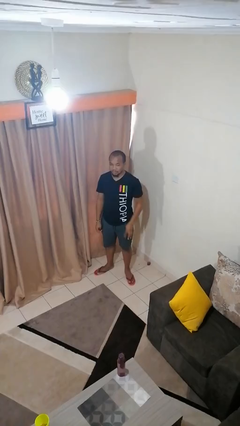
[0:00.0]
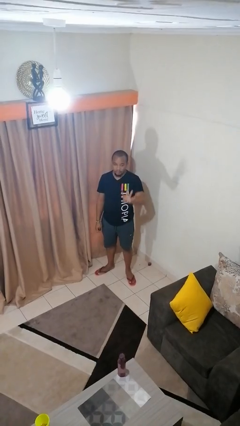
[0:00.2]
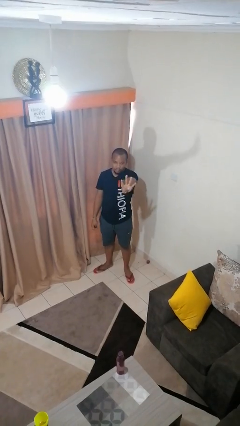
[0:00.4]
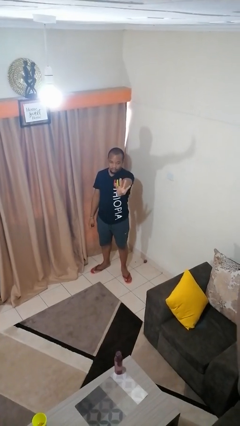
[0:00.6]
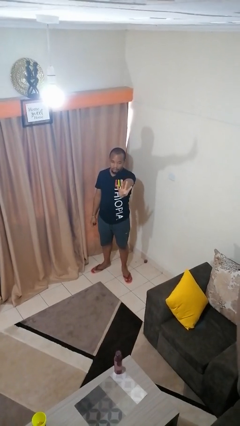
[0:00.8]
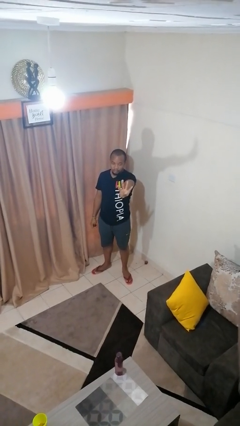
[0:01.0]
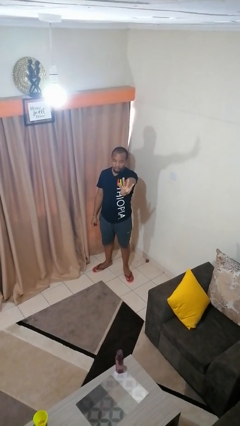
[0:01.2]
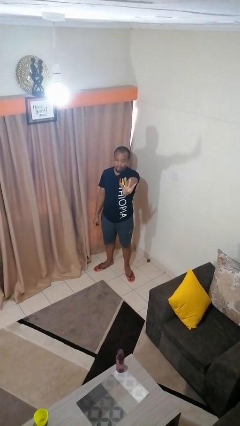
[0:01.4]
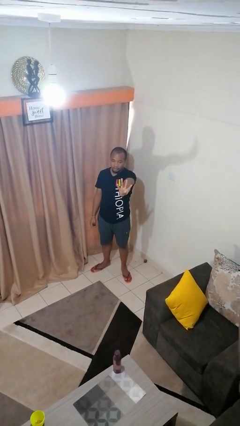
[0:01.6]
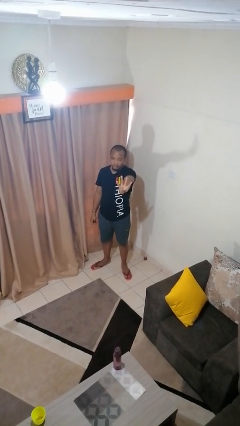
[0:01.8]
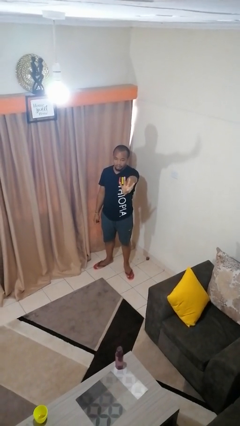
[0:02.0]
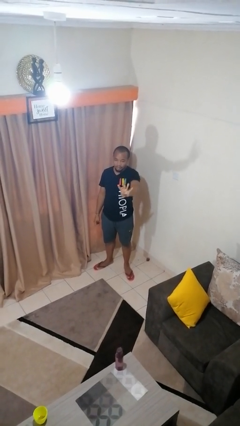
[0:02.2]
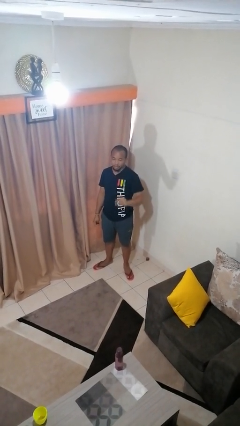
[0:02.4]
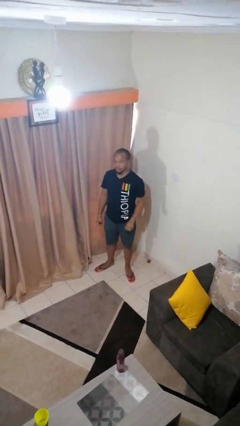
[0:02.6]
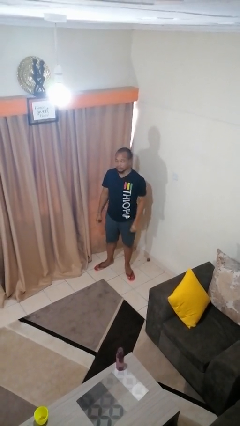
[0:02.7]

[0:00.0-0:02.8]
person gestures number four

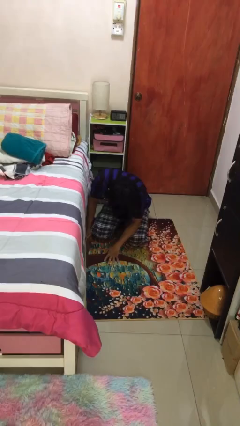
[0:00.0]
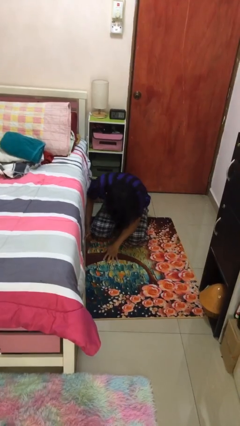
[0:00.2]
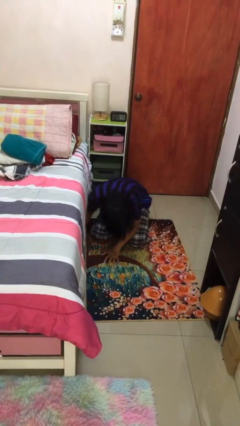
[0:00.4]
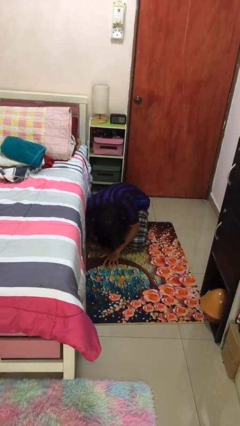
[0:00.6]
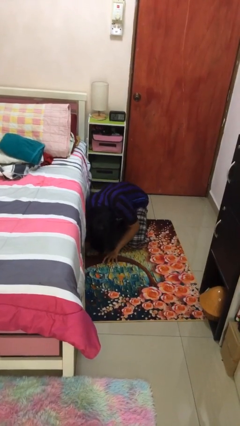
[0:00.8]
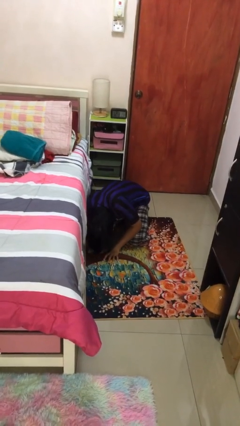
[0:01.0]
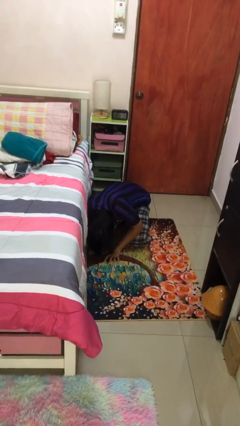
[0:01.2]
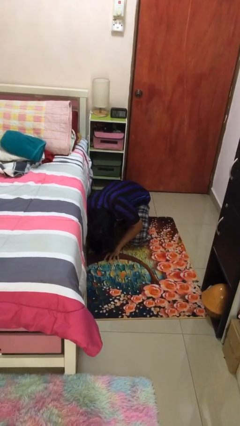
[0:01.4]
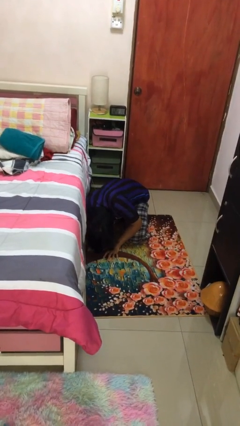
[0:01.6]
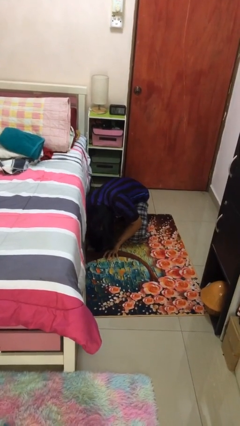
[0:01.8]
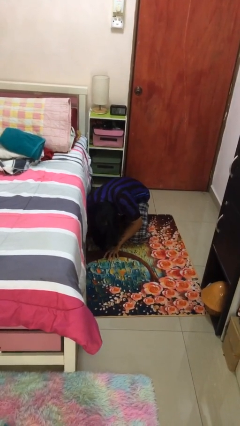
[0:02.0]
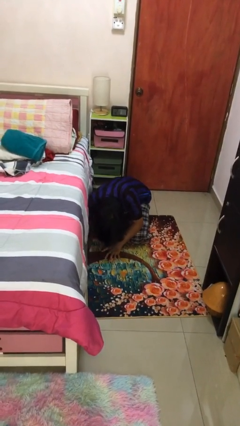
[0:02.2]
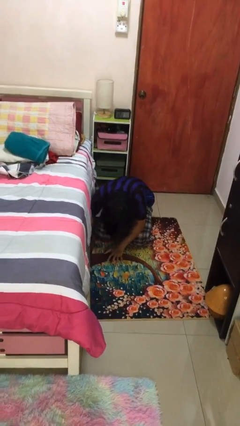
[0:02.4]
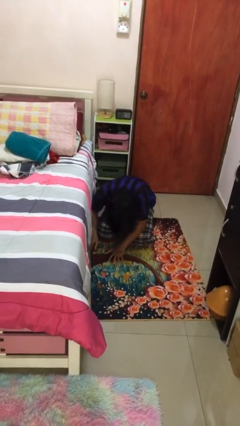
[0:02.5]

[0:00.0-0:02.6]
person searches under bed

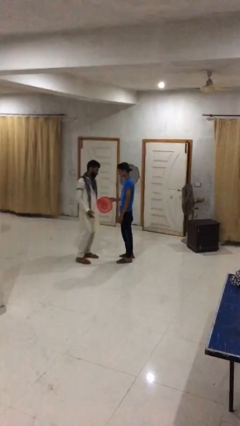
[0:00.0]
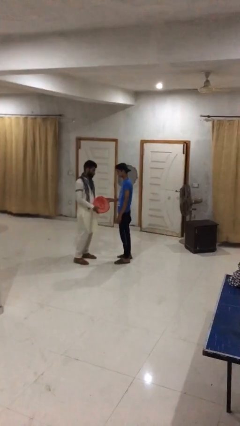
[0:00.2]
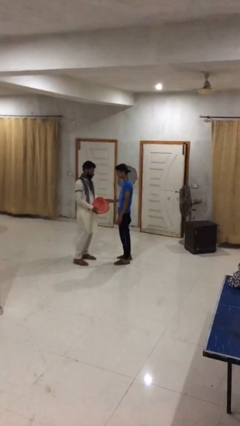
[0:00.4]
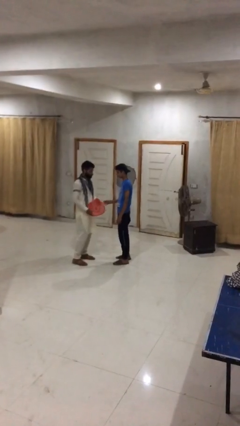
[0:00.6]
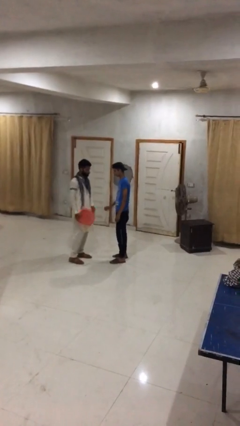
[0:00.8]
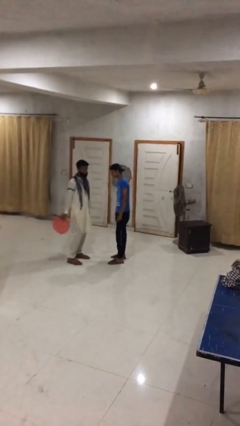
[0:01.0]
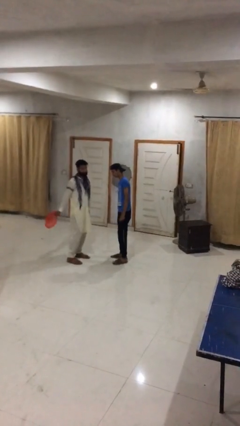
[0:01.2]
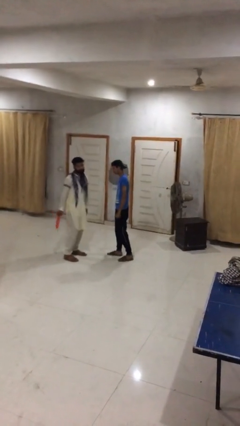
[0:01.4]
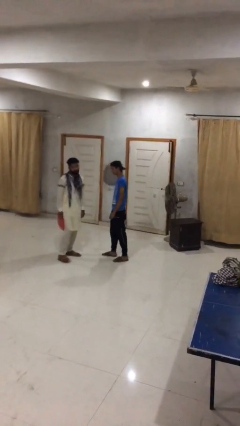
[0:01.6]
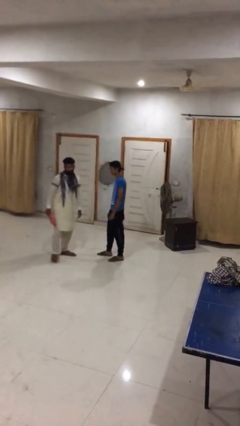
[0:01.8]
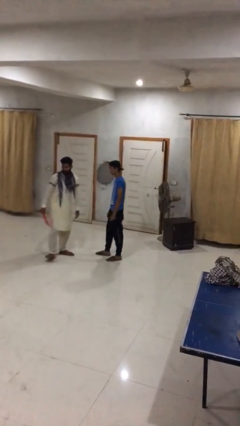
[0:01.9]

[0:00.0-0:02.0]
person transfers object to person

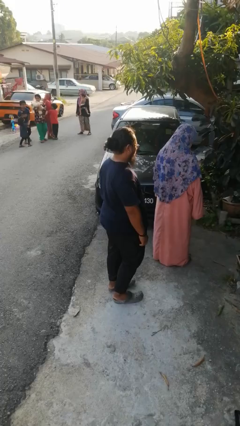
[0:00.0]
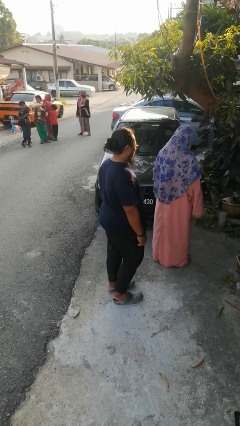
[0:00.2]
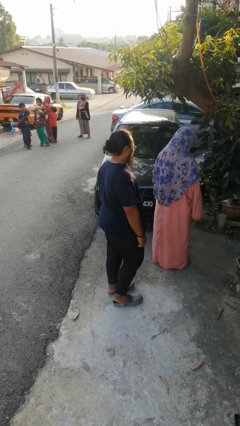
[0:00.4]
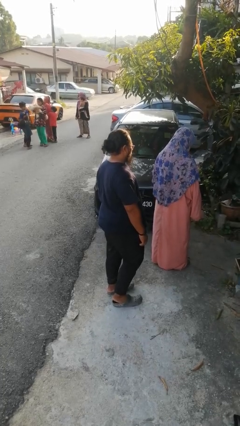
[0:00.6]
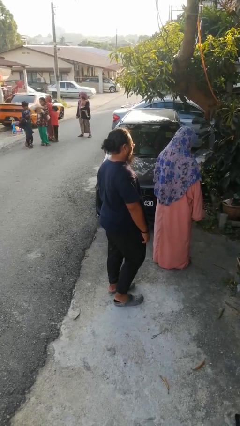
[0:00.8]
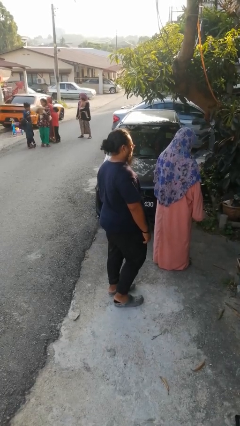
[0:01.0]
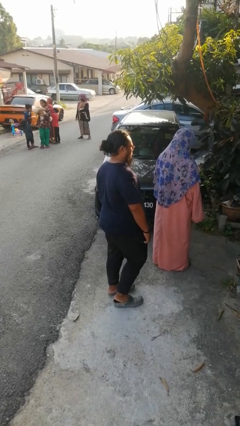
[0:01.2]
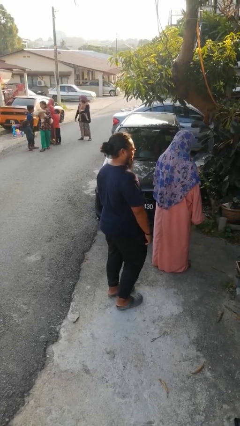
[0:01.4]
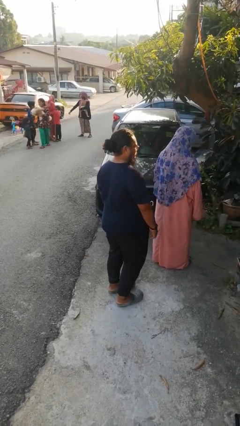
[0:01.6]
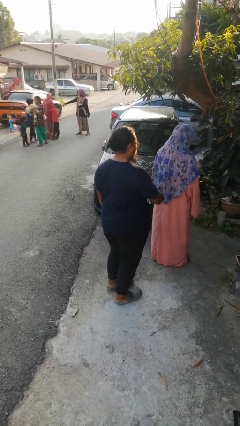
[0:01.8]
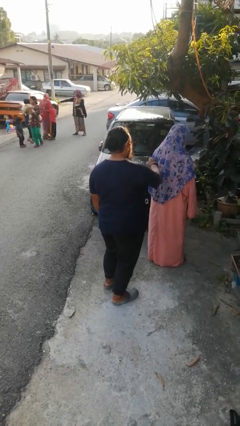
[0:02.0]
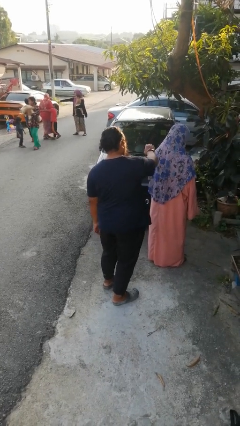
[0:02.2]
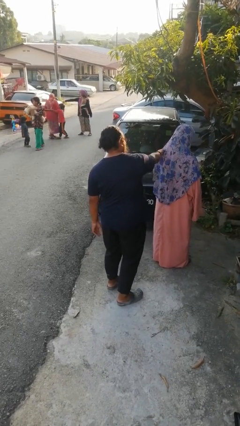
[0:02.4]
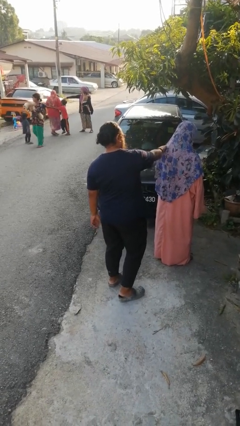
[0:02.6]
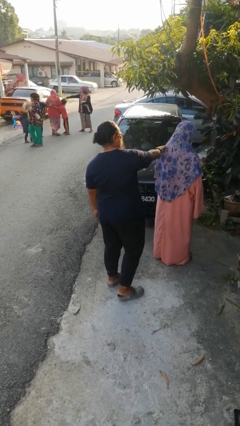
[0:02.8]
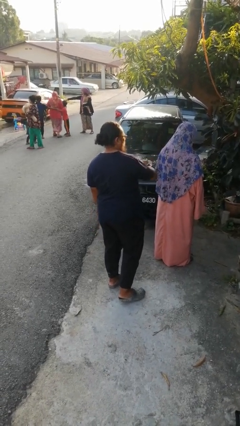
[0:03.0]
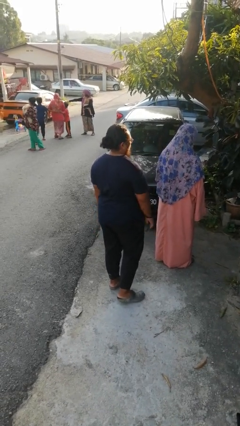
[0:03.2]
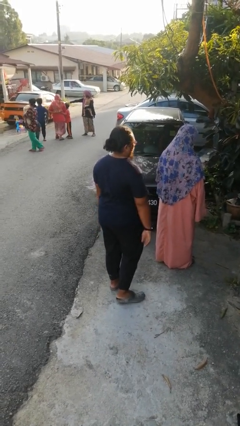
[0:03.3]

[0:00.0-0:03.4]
person touches back of person

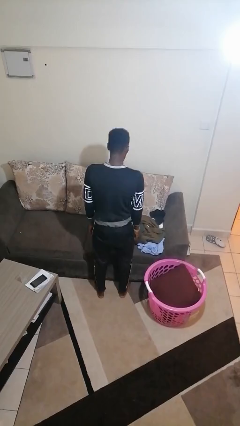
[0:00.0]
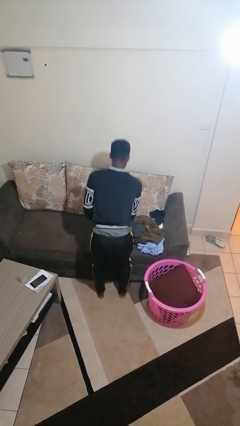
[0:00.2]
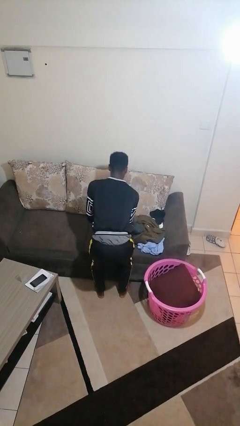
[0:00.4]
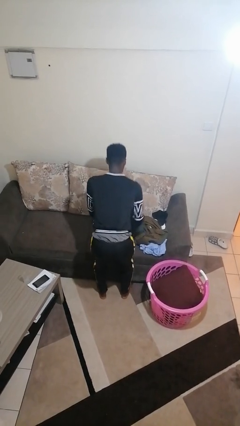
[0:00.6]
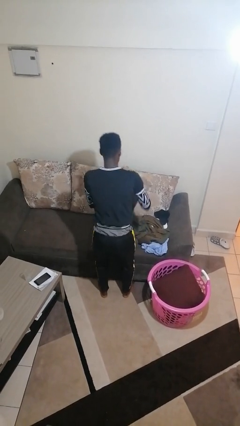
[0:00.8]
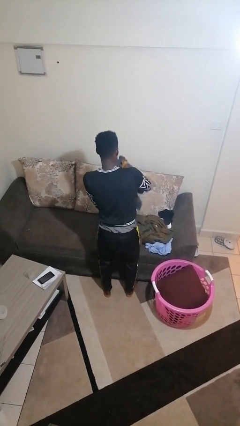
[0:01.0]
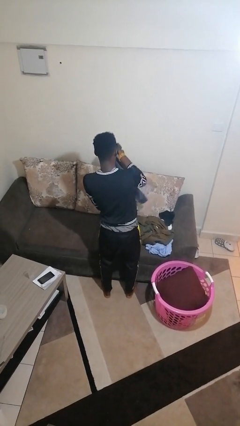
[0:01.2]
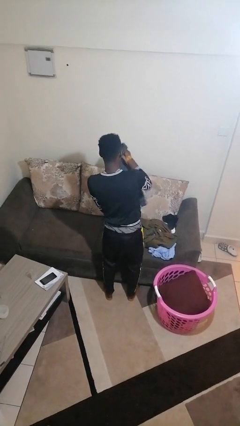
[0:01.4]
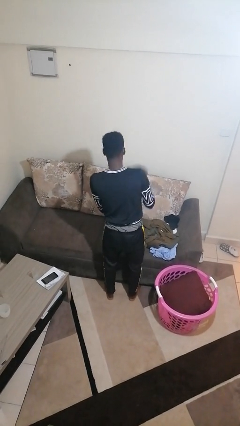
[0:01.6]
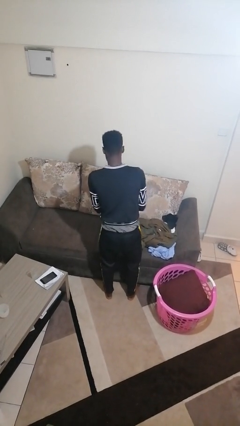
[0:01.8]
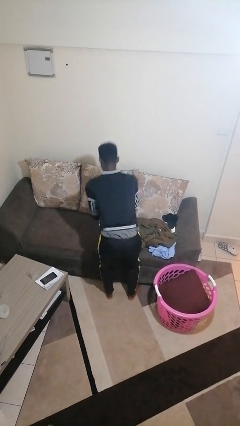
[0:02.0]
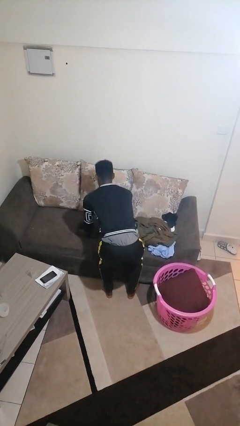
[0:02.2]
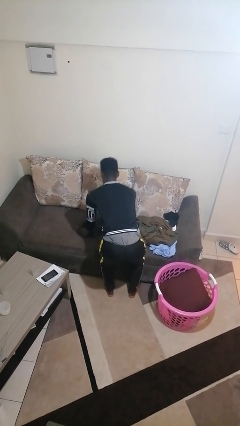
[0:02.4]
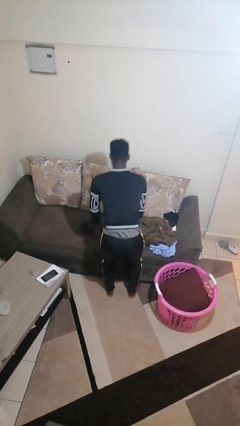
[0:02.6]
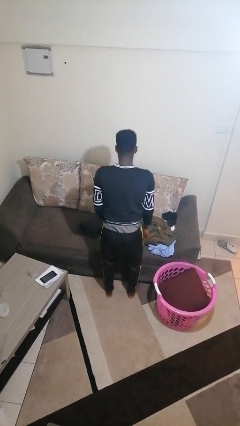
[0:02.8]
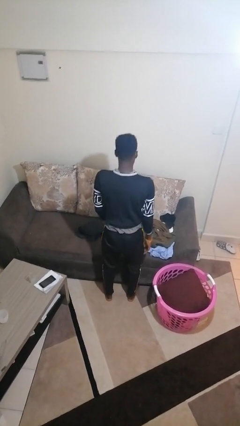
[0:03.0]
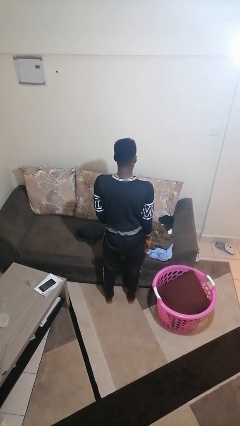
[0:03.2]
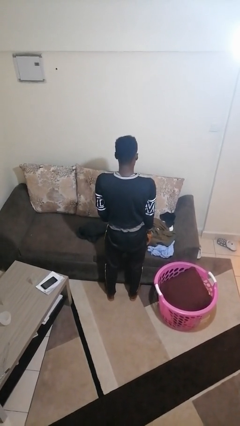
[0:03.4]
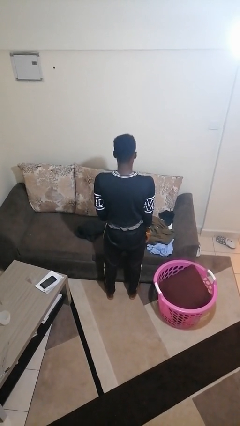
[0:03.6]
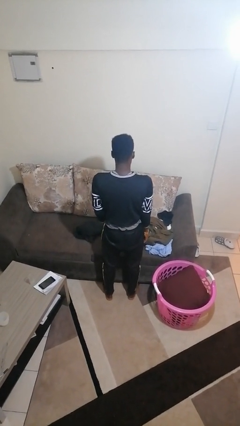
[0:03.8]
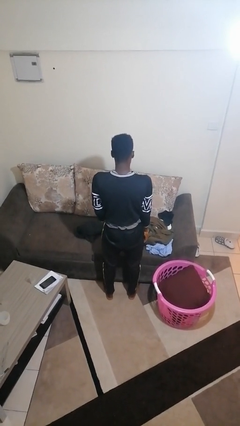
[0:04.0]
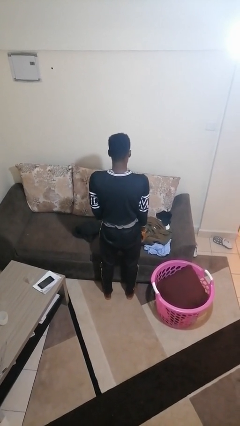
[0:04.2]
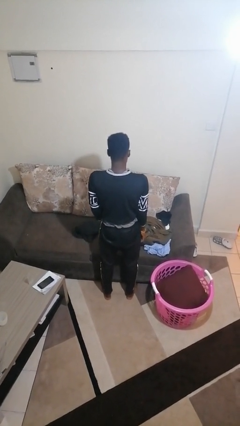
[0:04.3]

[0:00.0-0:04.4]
person folds pants

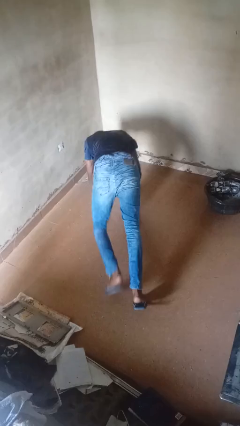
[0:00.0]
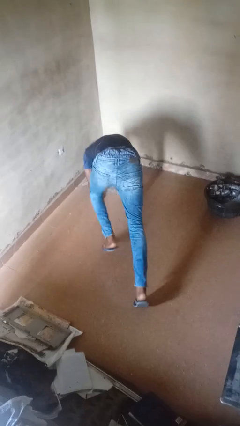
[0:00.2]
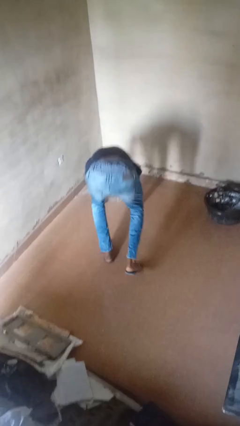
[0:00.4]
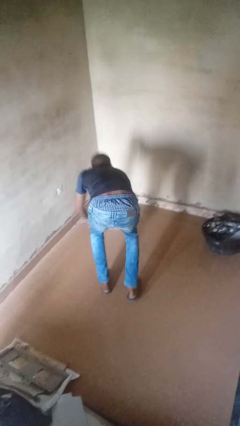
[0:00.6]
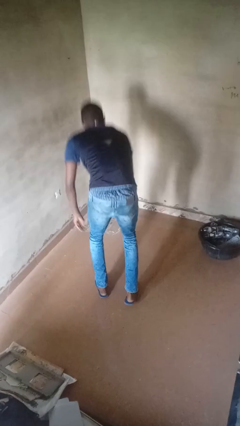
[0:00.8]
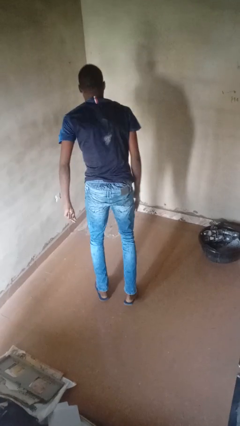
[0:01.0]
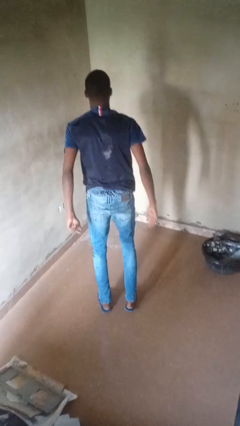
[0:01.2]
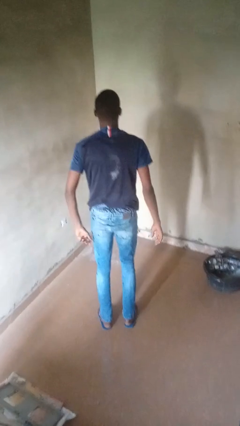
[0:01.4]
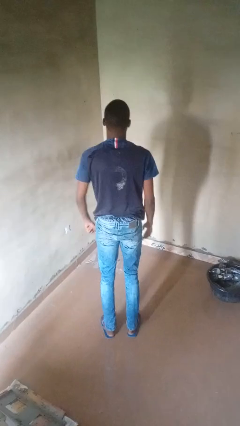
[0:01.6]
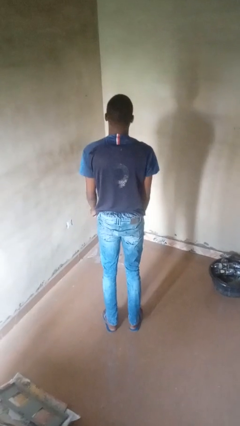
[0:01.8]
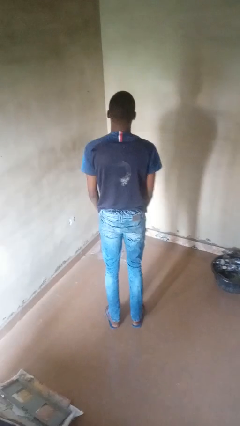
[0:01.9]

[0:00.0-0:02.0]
person stands up from floor
